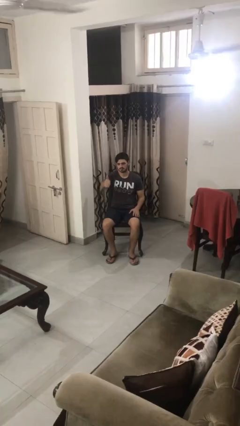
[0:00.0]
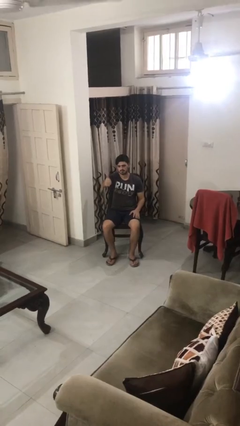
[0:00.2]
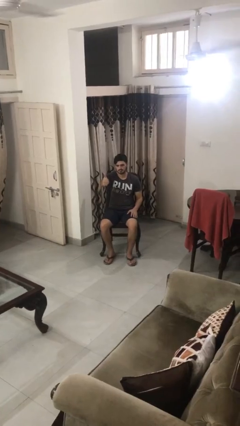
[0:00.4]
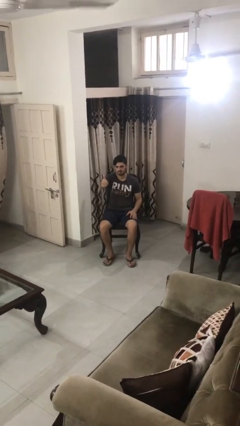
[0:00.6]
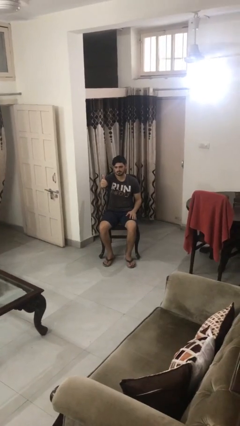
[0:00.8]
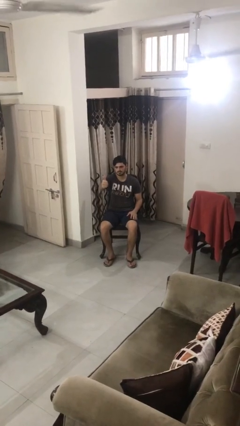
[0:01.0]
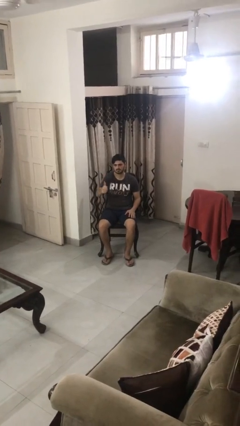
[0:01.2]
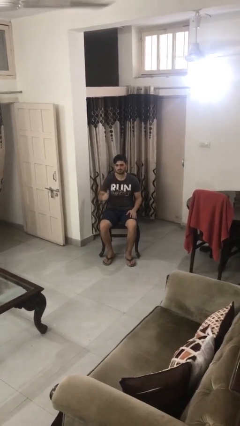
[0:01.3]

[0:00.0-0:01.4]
person gestures thumbs up

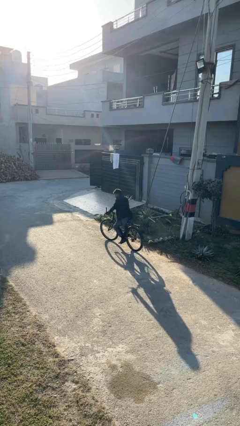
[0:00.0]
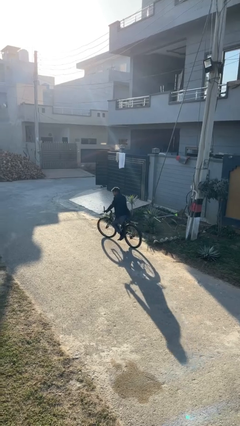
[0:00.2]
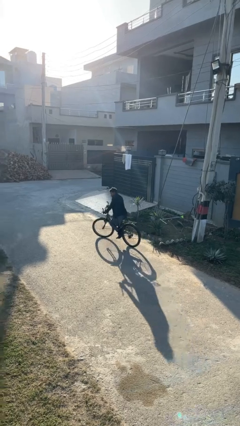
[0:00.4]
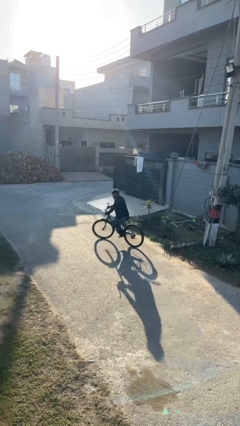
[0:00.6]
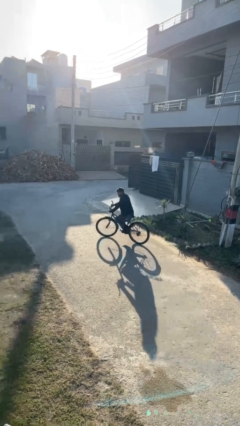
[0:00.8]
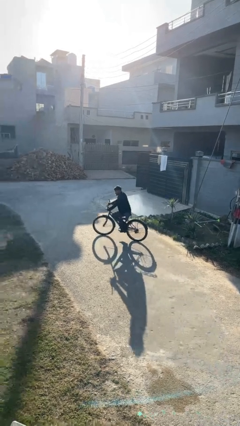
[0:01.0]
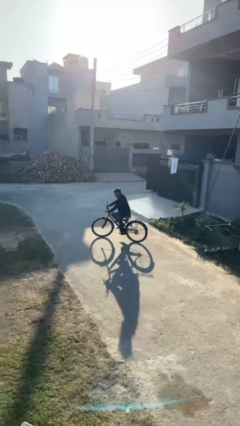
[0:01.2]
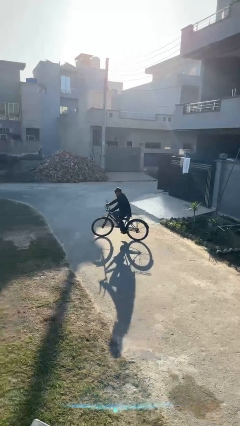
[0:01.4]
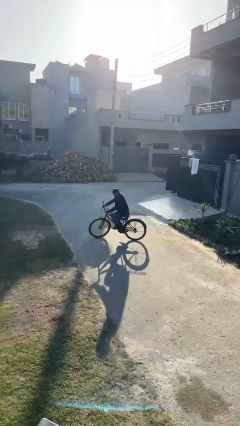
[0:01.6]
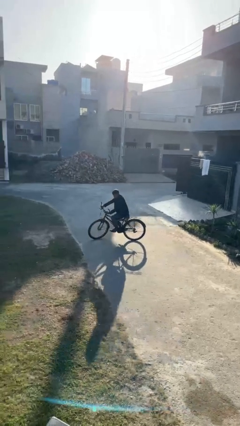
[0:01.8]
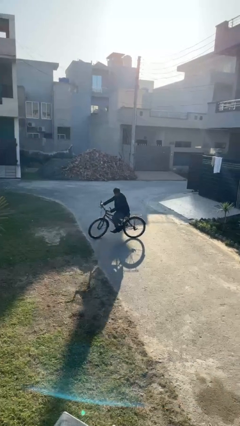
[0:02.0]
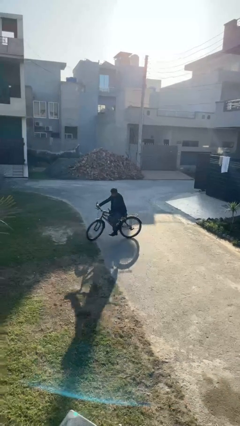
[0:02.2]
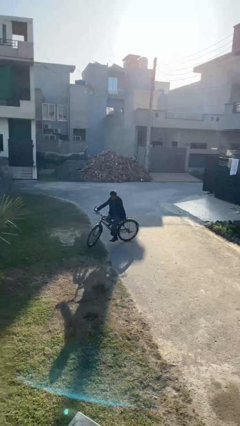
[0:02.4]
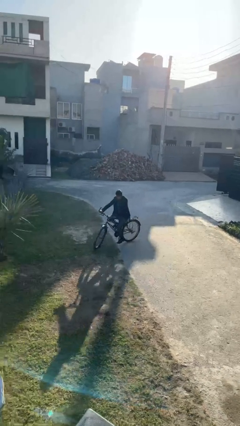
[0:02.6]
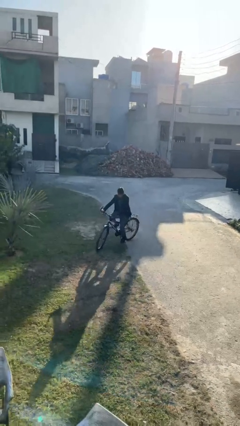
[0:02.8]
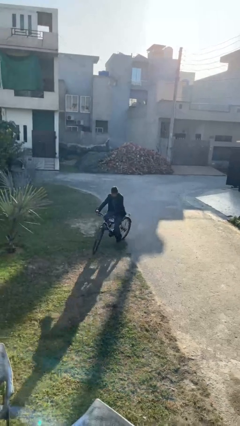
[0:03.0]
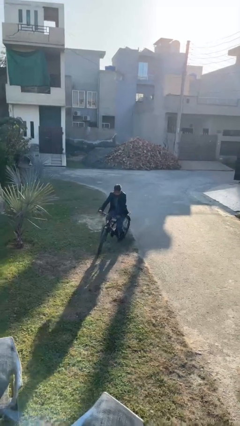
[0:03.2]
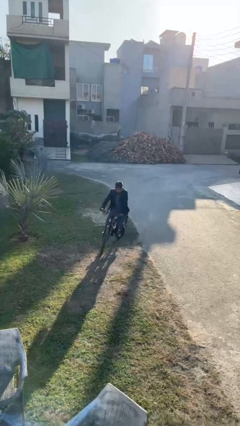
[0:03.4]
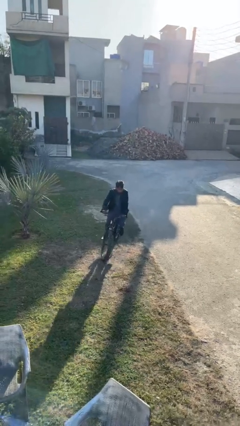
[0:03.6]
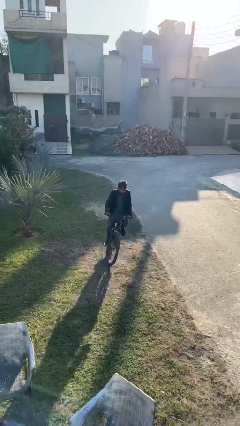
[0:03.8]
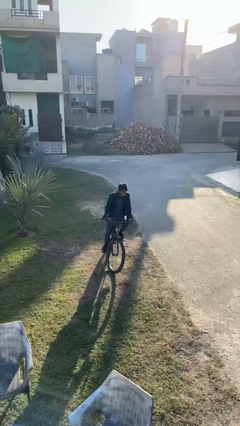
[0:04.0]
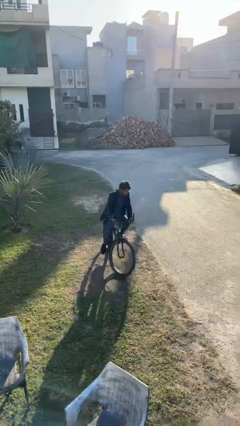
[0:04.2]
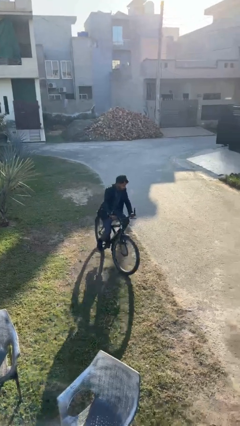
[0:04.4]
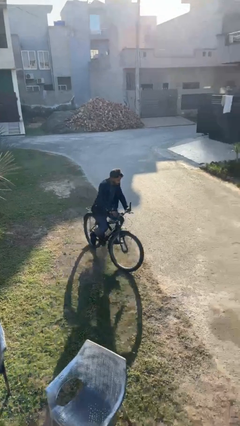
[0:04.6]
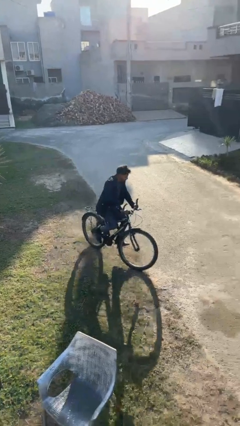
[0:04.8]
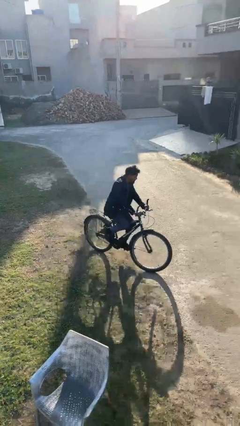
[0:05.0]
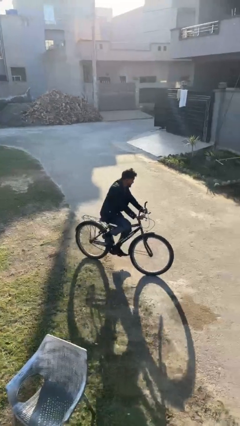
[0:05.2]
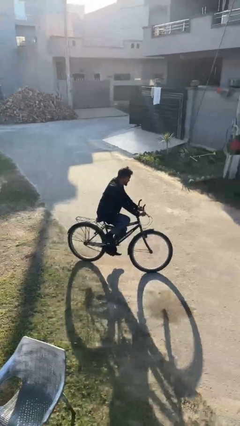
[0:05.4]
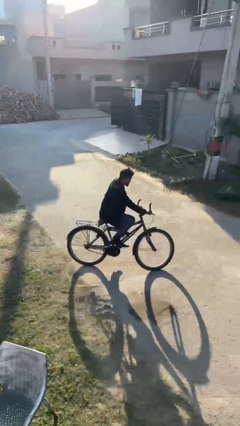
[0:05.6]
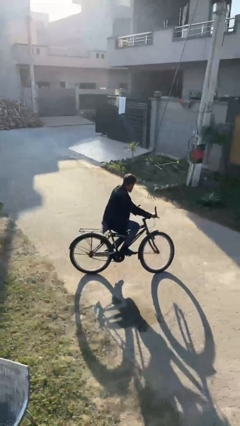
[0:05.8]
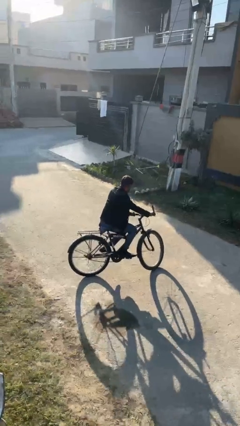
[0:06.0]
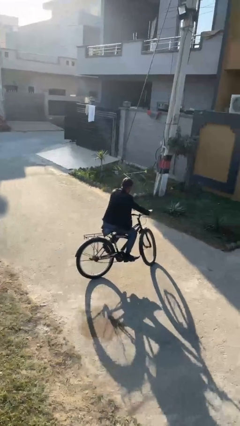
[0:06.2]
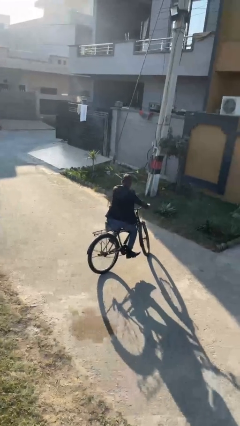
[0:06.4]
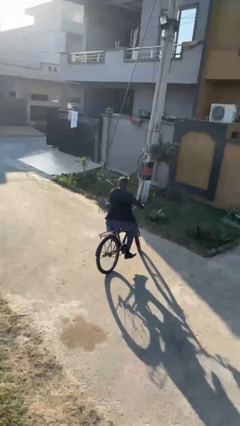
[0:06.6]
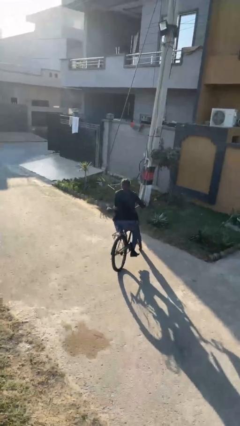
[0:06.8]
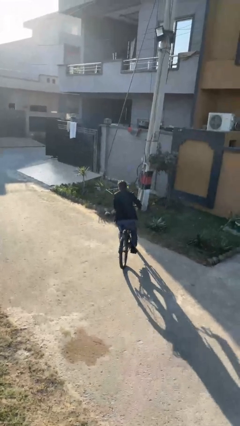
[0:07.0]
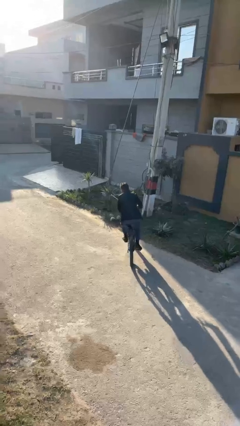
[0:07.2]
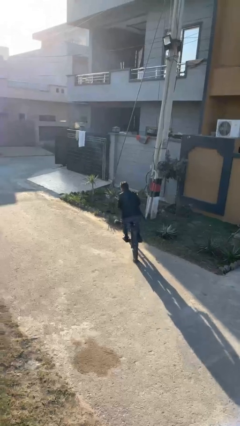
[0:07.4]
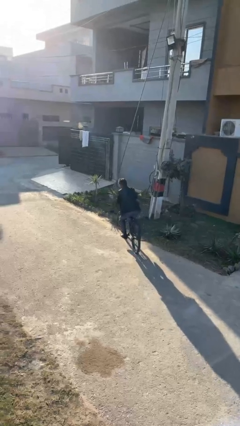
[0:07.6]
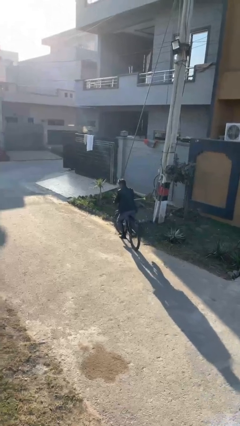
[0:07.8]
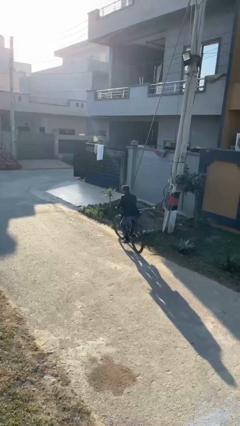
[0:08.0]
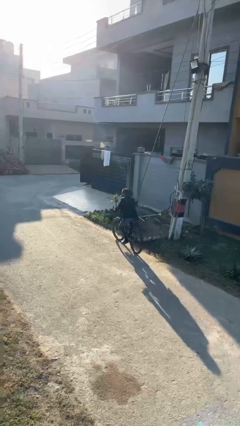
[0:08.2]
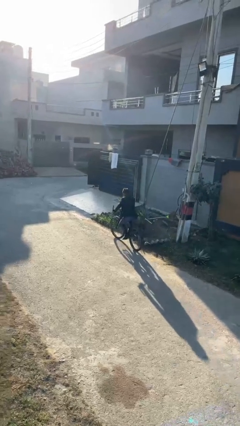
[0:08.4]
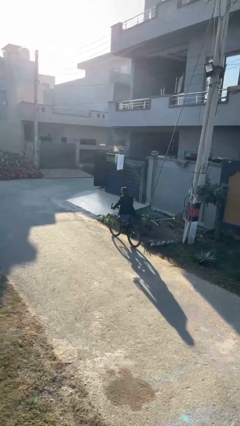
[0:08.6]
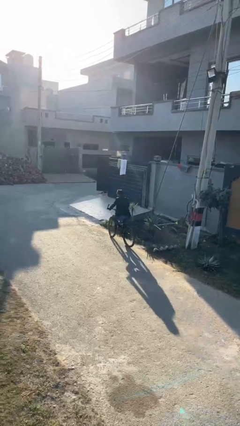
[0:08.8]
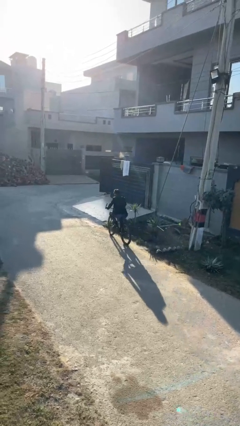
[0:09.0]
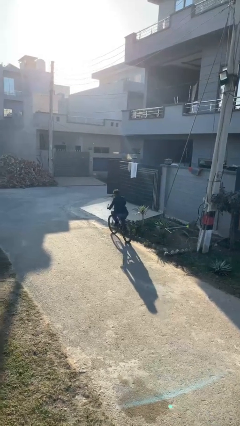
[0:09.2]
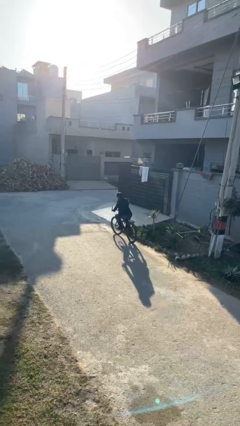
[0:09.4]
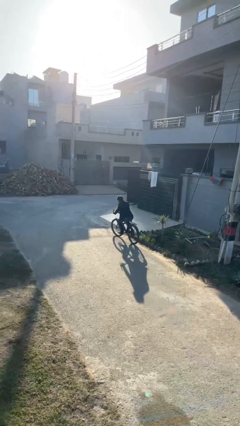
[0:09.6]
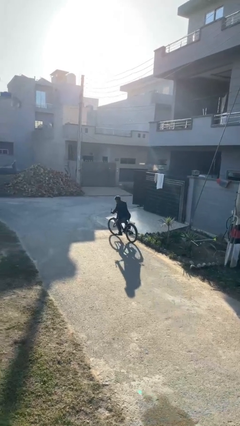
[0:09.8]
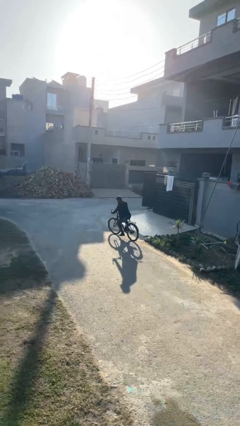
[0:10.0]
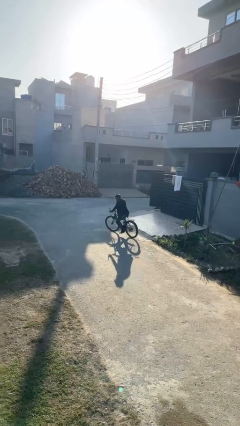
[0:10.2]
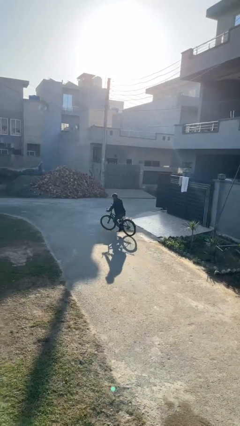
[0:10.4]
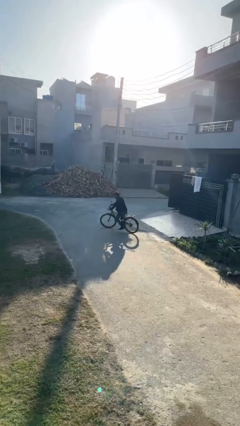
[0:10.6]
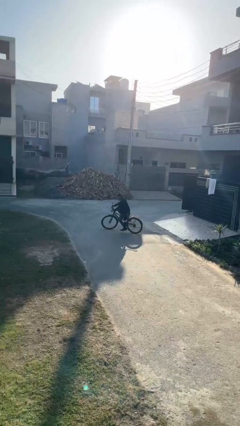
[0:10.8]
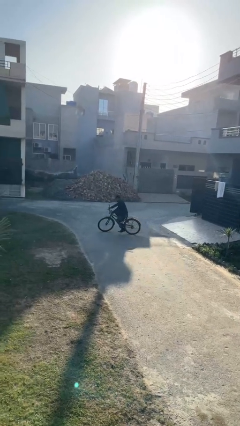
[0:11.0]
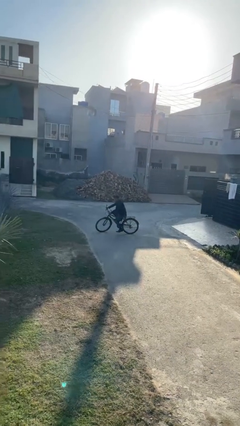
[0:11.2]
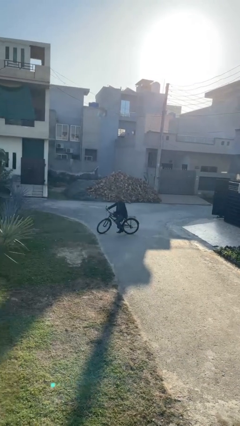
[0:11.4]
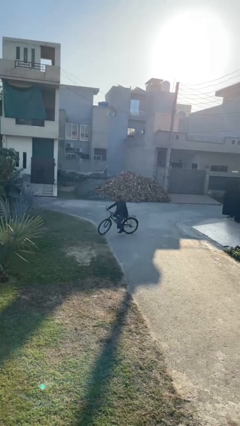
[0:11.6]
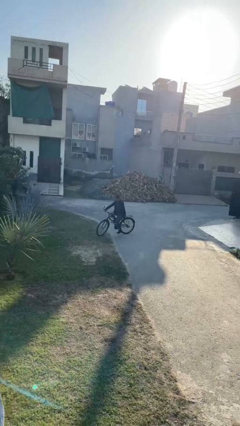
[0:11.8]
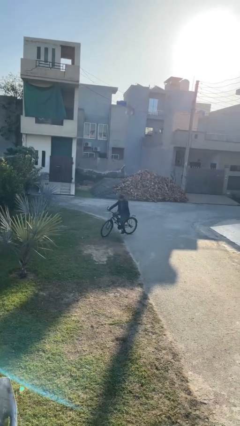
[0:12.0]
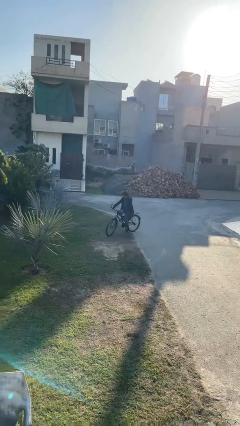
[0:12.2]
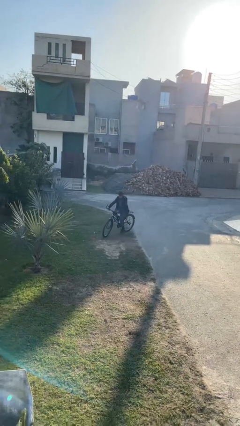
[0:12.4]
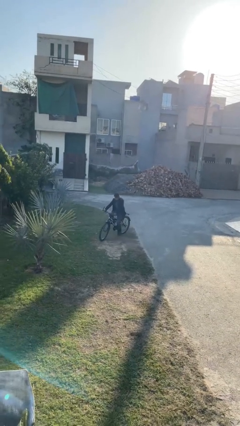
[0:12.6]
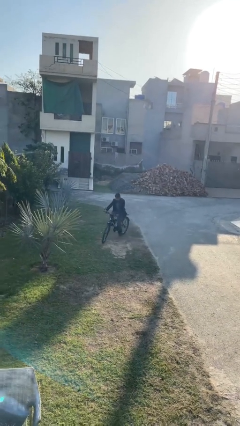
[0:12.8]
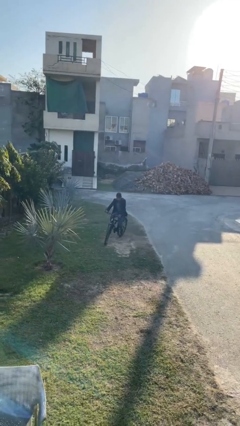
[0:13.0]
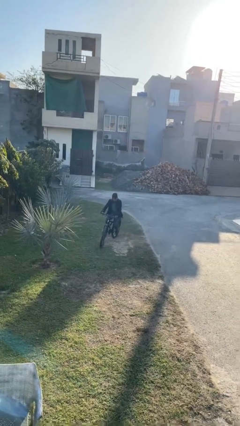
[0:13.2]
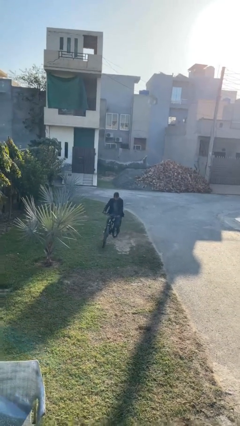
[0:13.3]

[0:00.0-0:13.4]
person rides bicycle

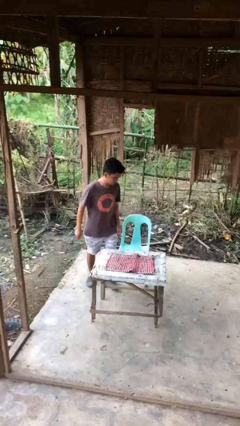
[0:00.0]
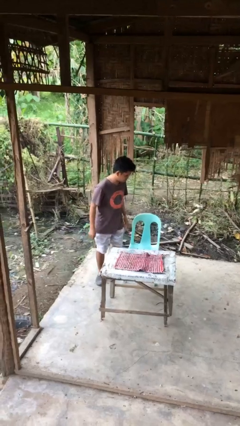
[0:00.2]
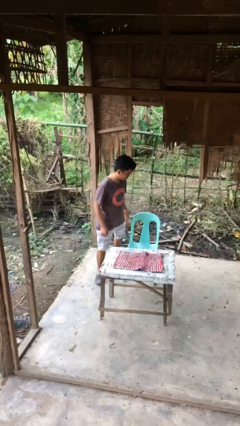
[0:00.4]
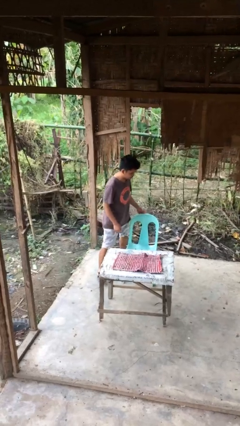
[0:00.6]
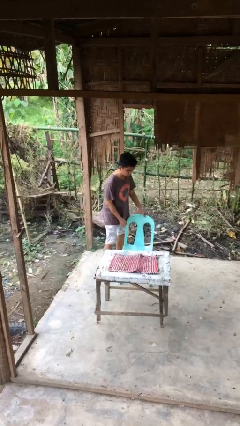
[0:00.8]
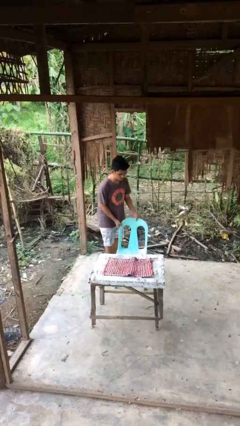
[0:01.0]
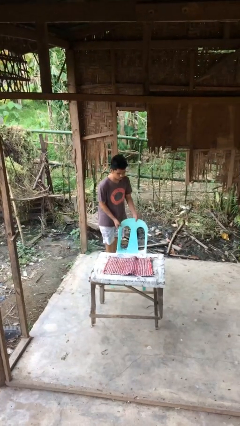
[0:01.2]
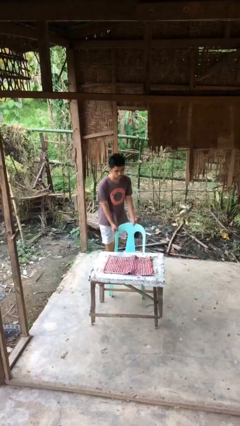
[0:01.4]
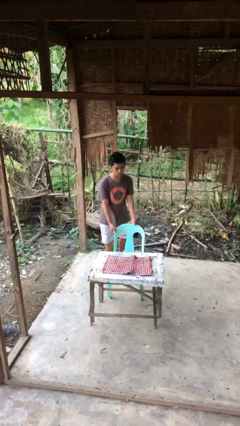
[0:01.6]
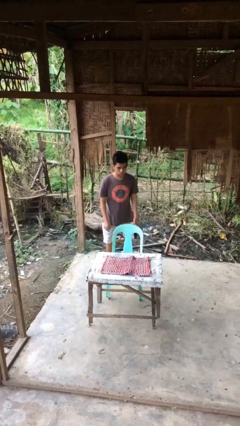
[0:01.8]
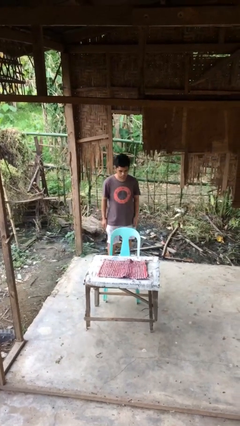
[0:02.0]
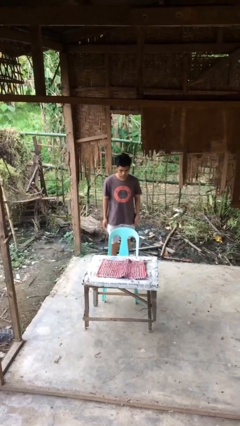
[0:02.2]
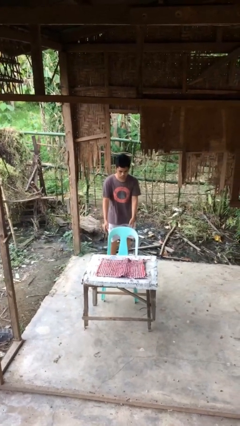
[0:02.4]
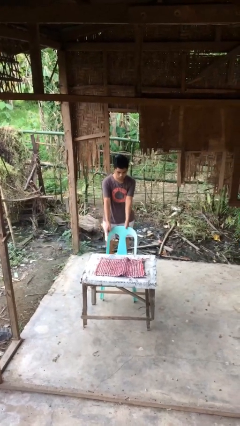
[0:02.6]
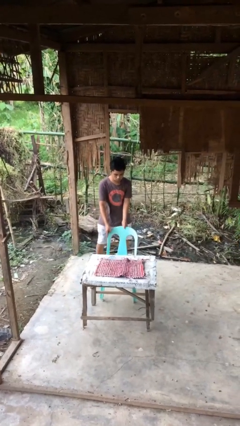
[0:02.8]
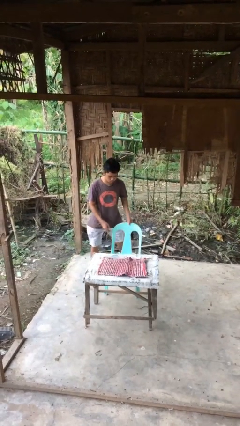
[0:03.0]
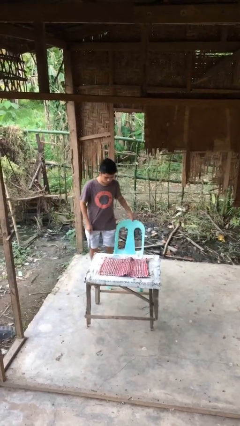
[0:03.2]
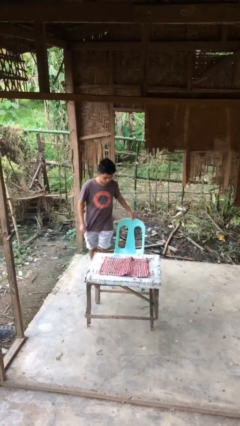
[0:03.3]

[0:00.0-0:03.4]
person stands up
